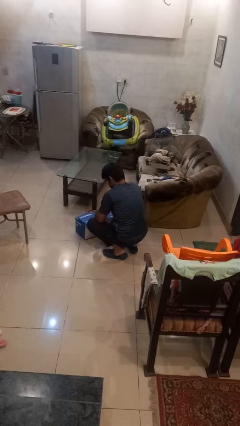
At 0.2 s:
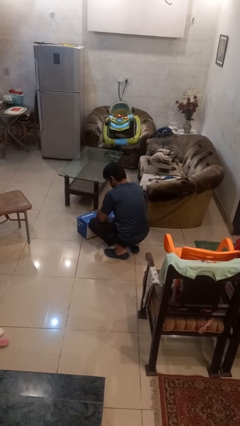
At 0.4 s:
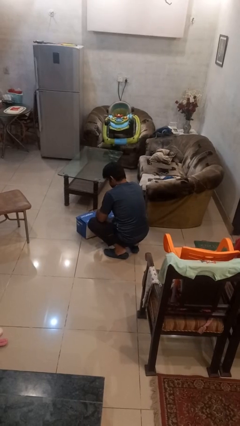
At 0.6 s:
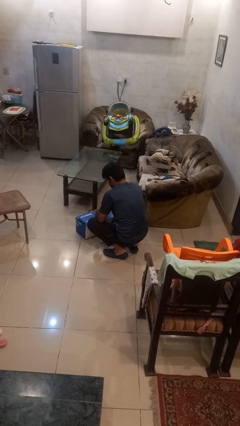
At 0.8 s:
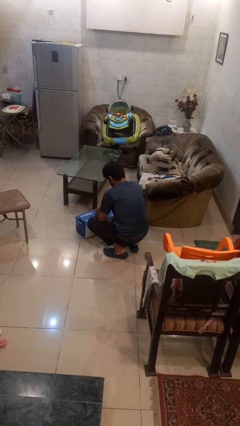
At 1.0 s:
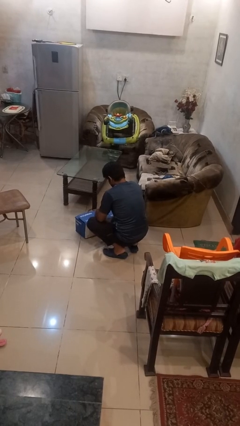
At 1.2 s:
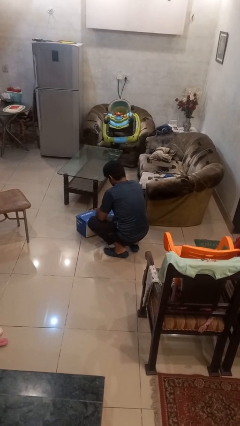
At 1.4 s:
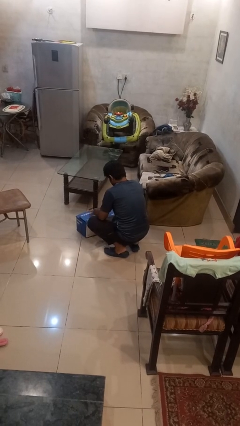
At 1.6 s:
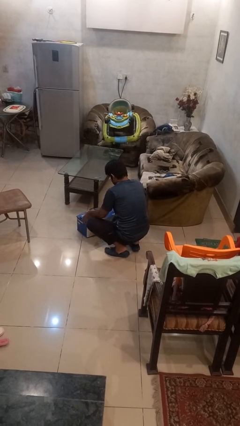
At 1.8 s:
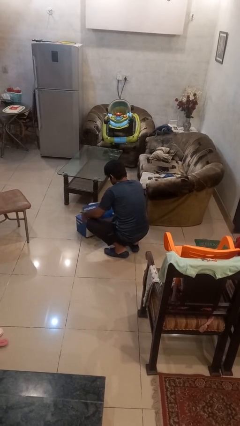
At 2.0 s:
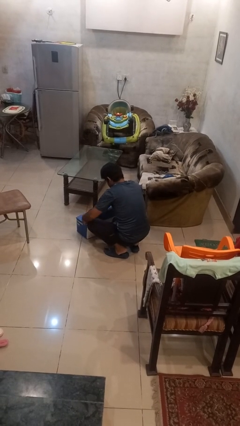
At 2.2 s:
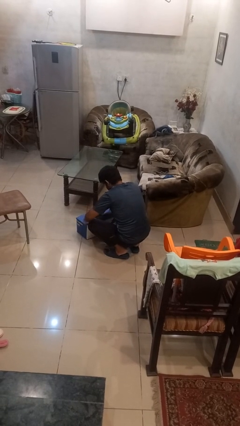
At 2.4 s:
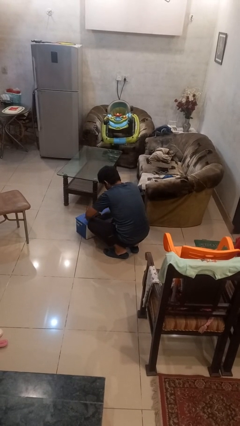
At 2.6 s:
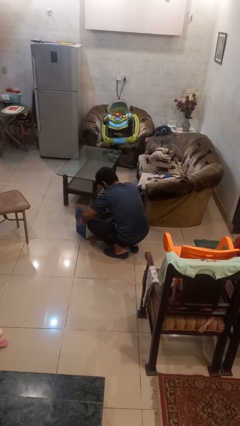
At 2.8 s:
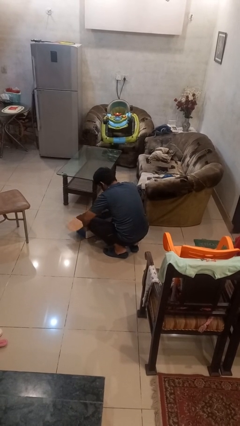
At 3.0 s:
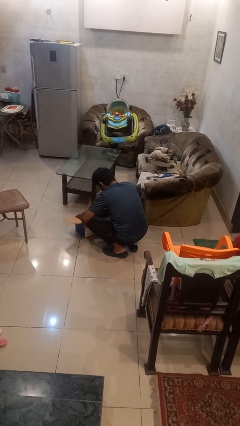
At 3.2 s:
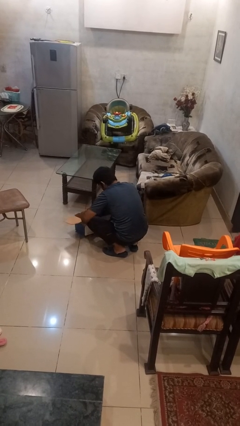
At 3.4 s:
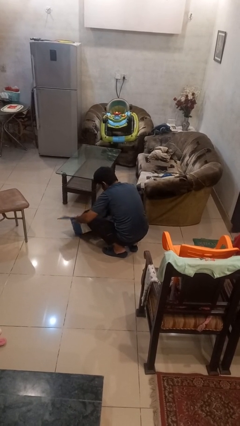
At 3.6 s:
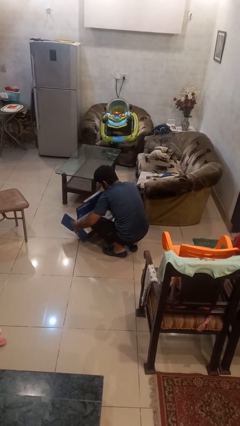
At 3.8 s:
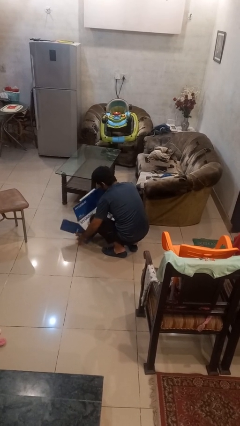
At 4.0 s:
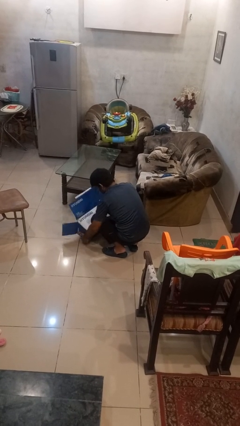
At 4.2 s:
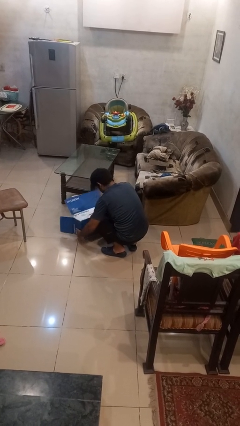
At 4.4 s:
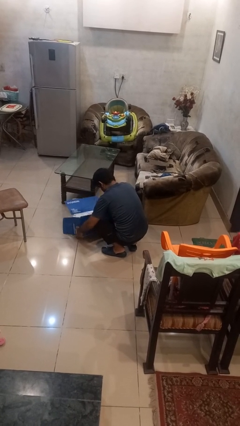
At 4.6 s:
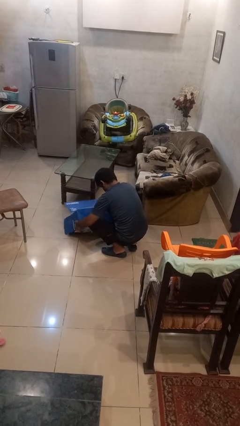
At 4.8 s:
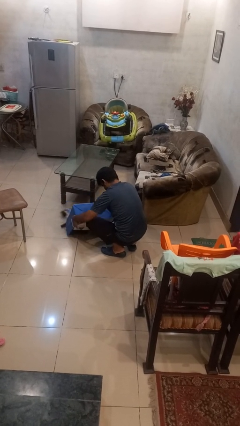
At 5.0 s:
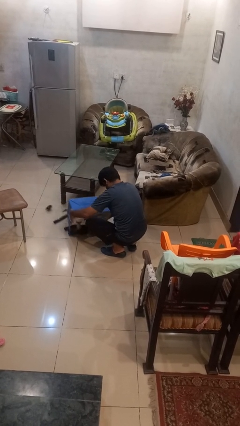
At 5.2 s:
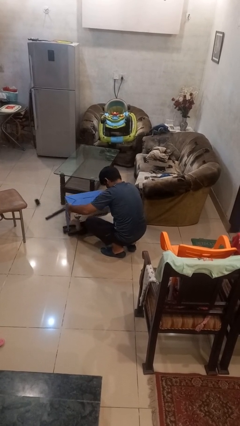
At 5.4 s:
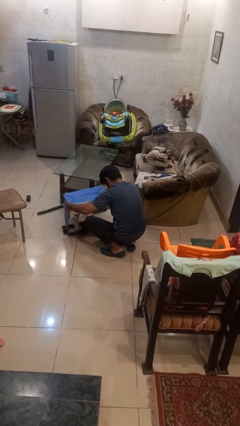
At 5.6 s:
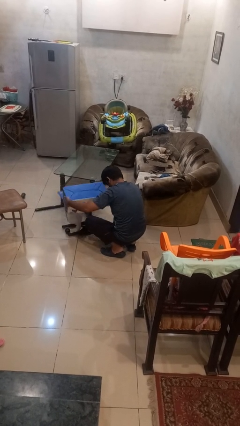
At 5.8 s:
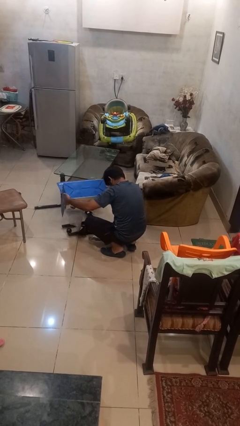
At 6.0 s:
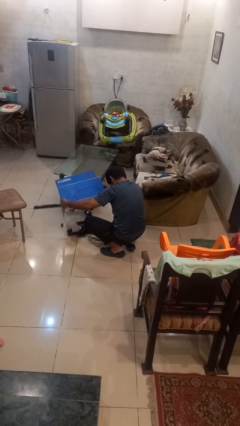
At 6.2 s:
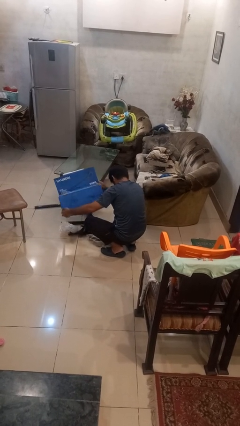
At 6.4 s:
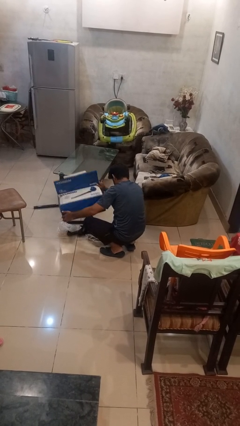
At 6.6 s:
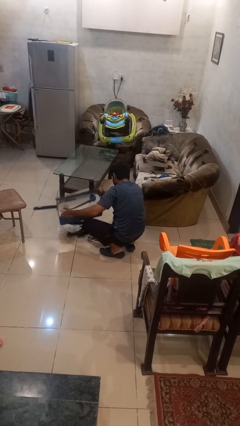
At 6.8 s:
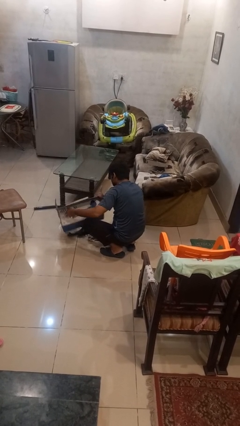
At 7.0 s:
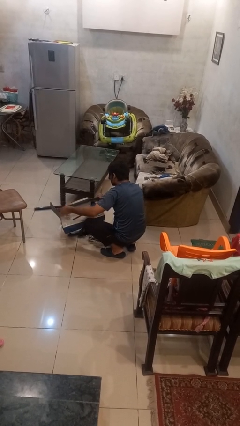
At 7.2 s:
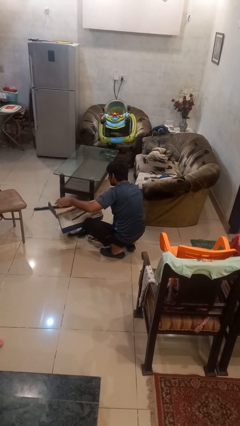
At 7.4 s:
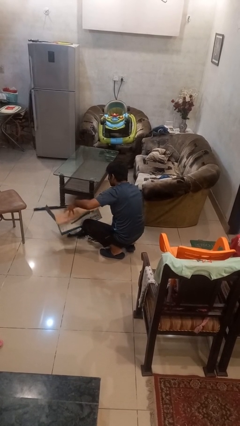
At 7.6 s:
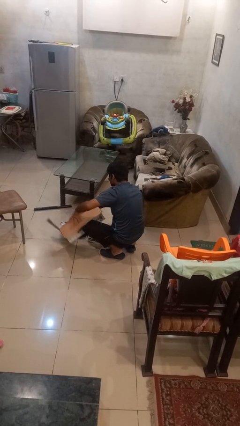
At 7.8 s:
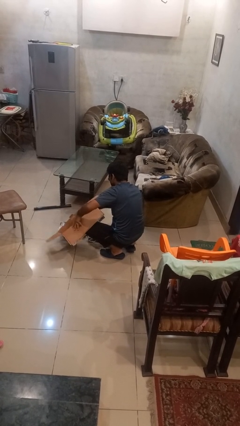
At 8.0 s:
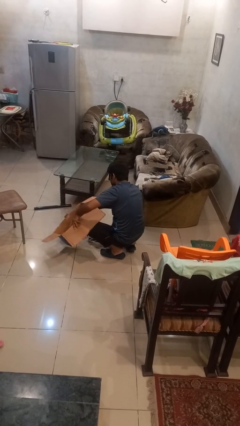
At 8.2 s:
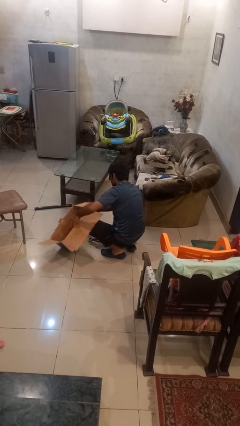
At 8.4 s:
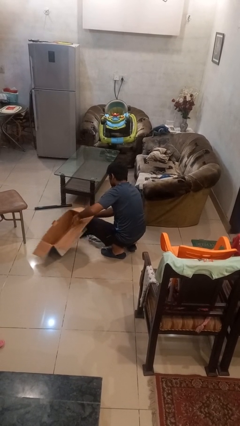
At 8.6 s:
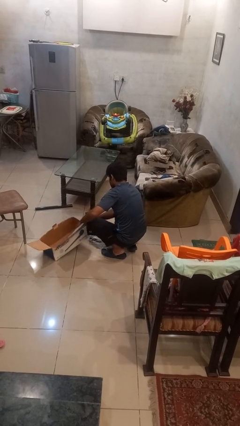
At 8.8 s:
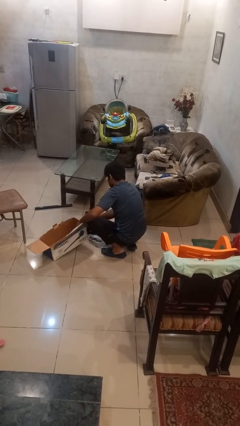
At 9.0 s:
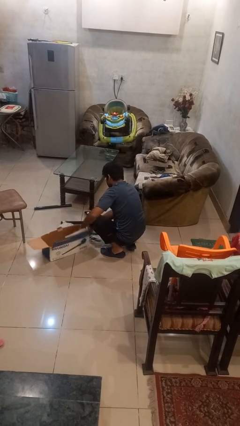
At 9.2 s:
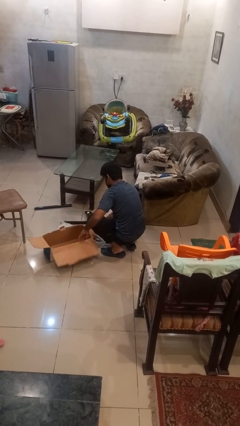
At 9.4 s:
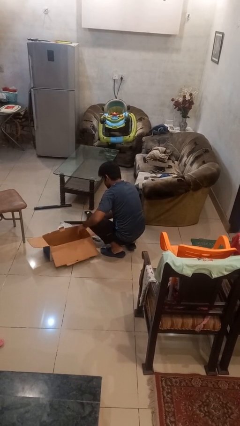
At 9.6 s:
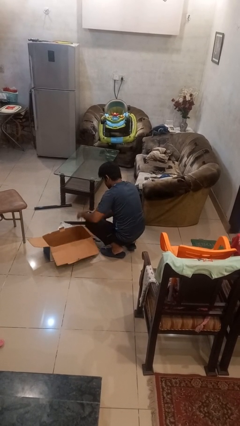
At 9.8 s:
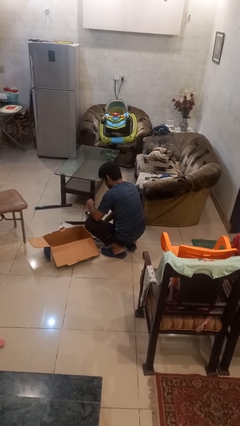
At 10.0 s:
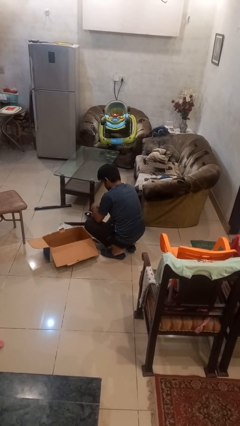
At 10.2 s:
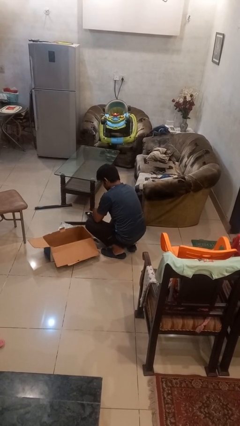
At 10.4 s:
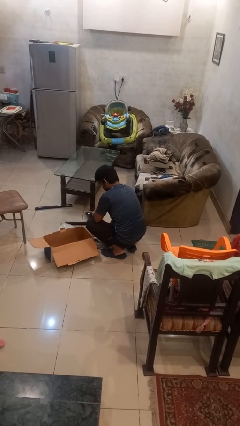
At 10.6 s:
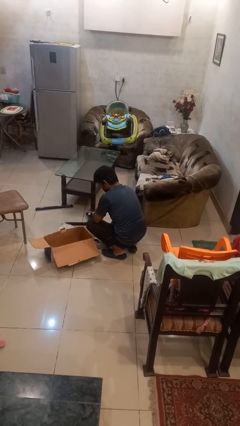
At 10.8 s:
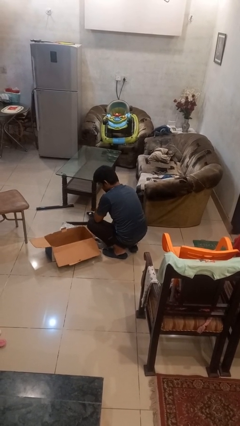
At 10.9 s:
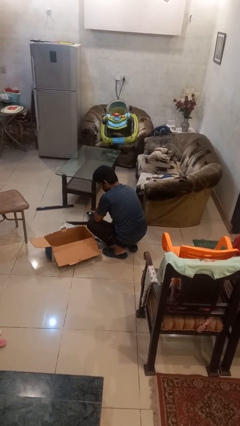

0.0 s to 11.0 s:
person unloads box onto floor

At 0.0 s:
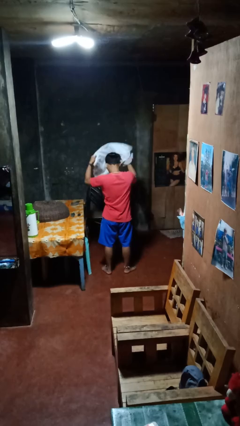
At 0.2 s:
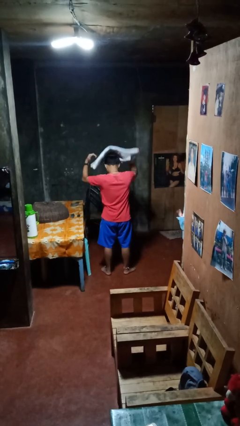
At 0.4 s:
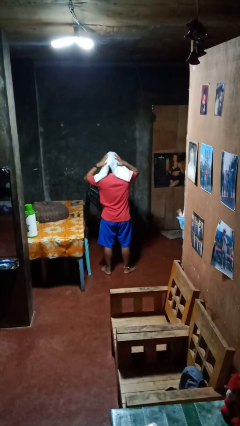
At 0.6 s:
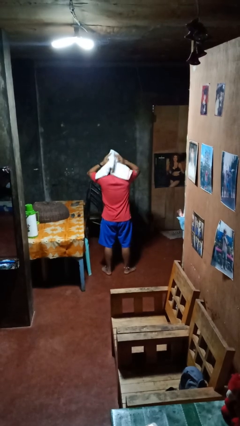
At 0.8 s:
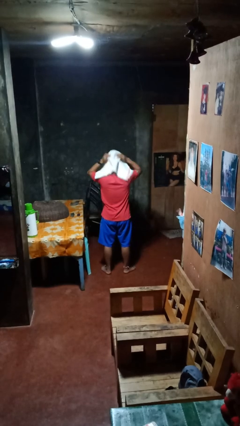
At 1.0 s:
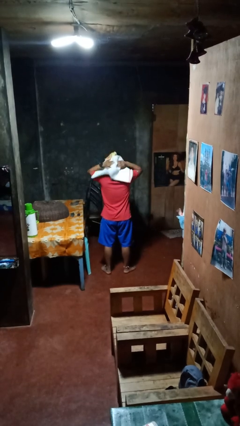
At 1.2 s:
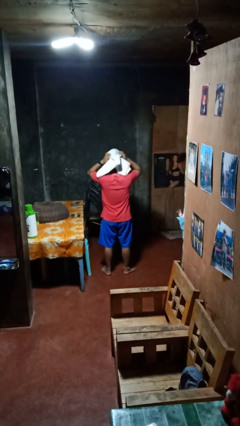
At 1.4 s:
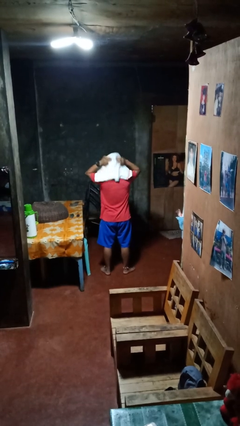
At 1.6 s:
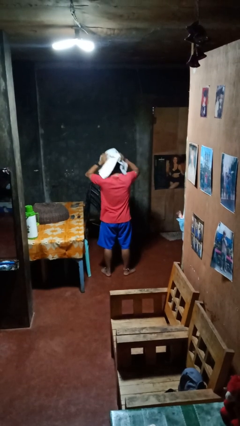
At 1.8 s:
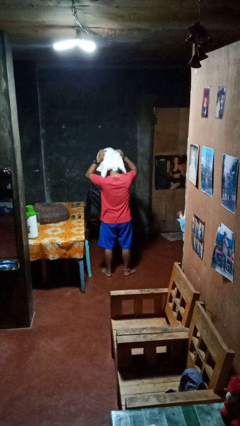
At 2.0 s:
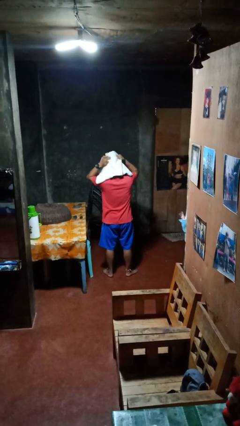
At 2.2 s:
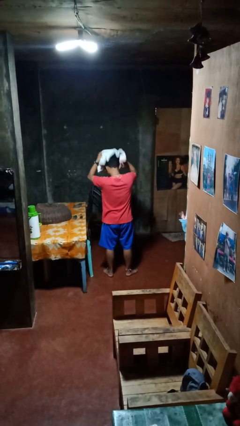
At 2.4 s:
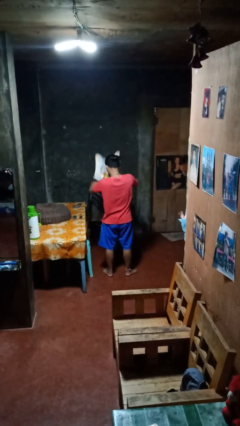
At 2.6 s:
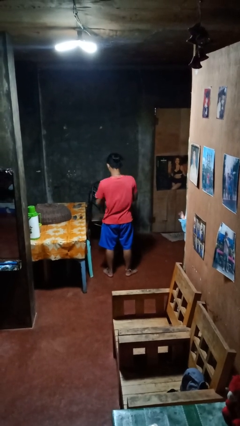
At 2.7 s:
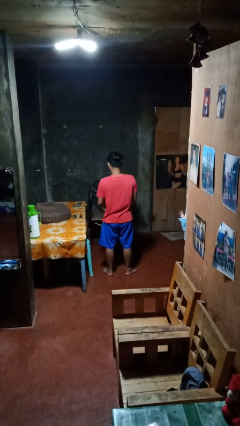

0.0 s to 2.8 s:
person dries hair with towel

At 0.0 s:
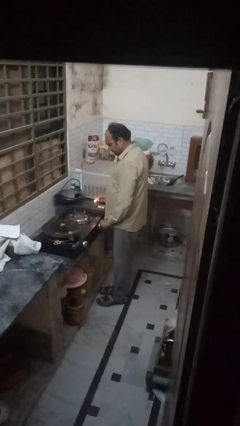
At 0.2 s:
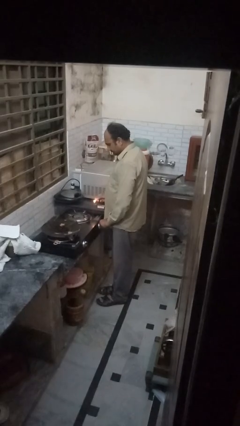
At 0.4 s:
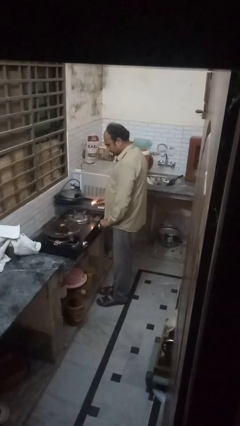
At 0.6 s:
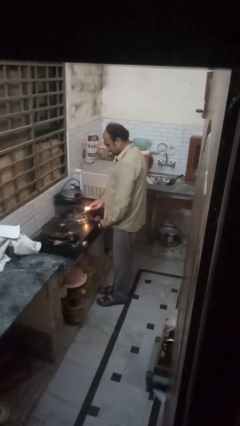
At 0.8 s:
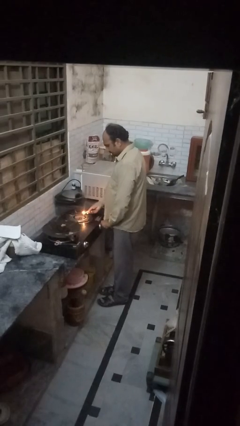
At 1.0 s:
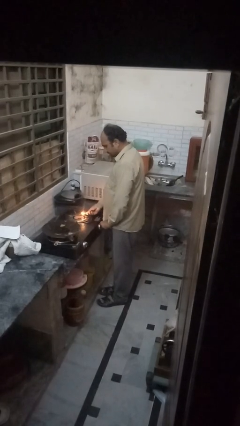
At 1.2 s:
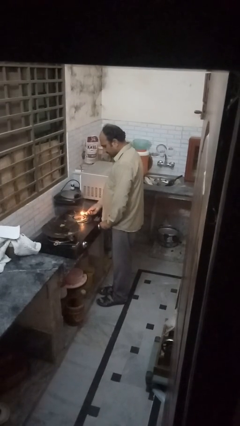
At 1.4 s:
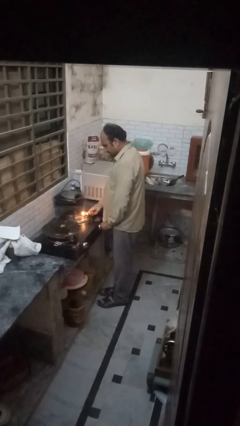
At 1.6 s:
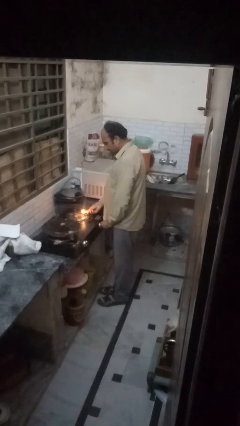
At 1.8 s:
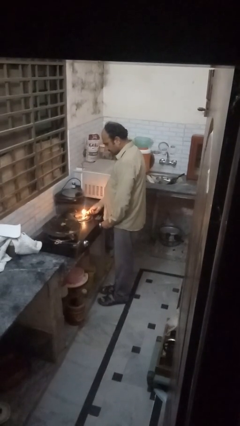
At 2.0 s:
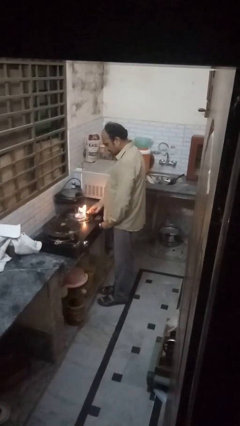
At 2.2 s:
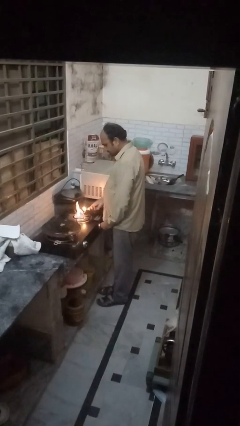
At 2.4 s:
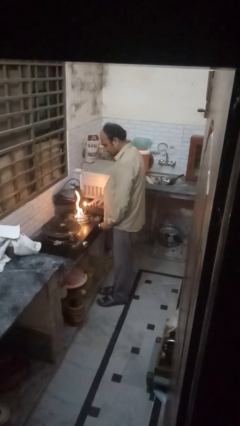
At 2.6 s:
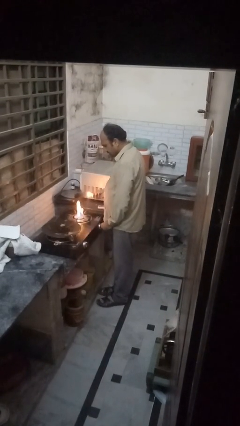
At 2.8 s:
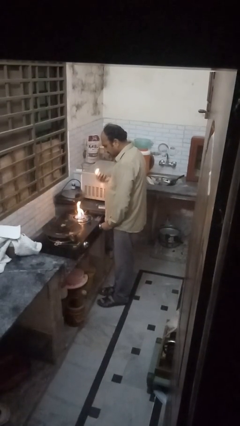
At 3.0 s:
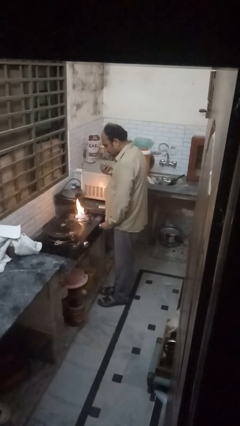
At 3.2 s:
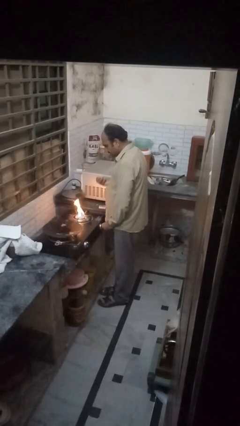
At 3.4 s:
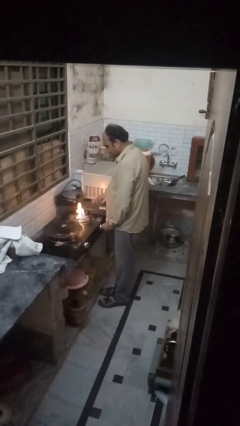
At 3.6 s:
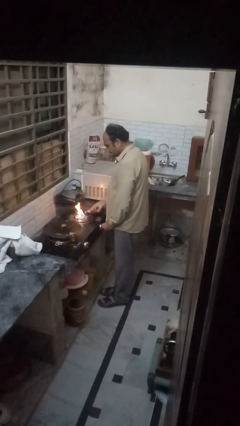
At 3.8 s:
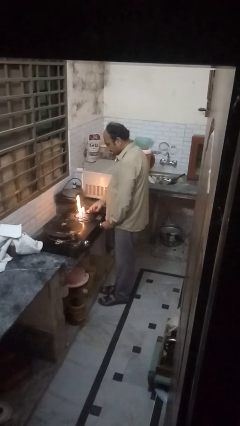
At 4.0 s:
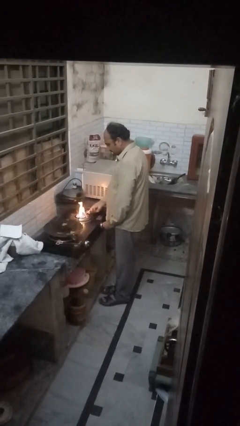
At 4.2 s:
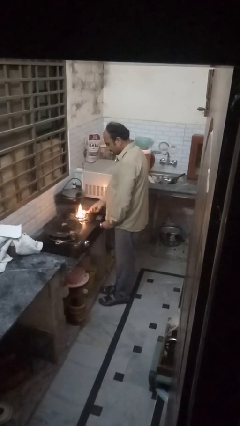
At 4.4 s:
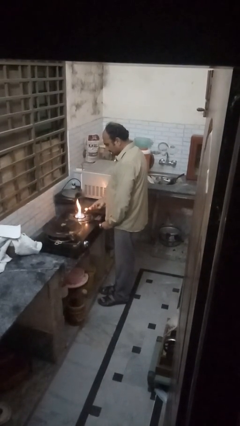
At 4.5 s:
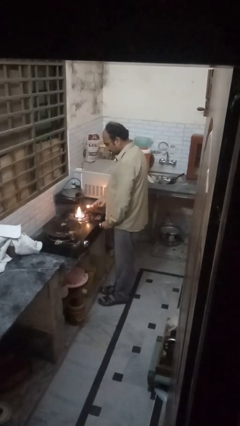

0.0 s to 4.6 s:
person turns on stovetop
